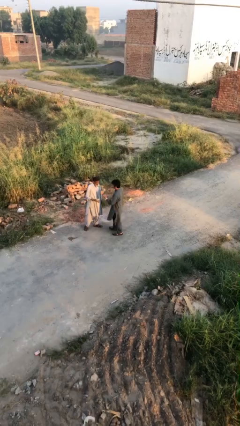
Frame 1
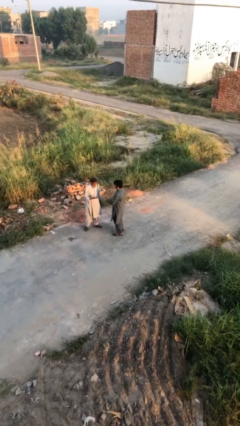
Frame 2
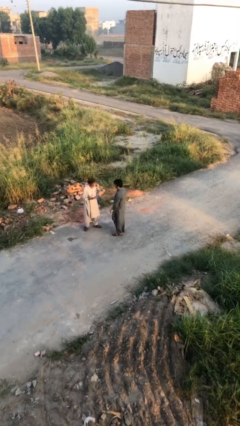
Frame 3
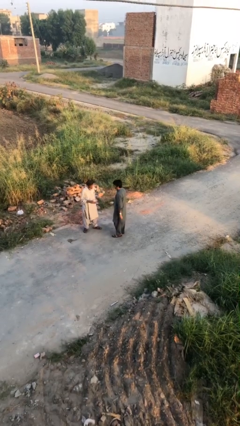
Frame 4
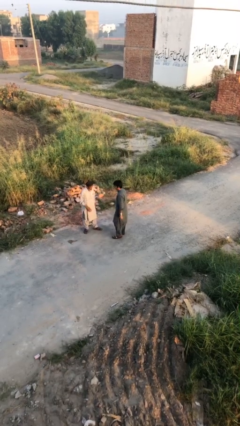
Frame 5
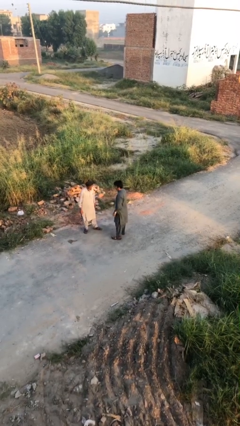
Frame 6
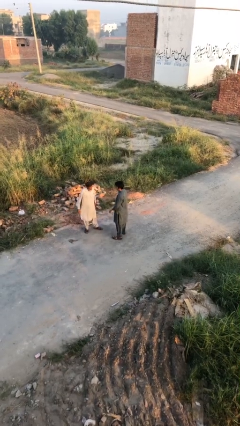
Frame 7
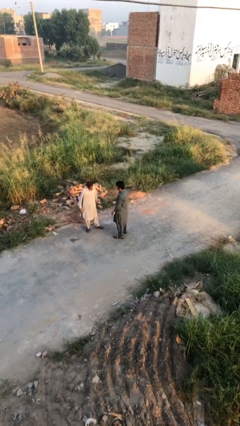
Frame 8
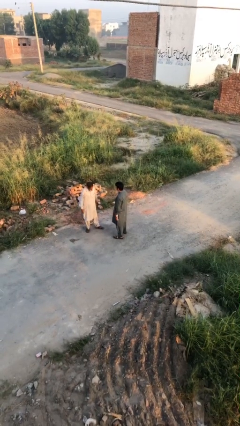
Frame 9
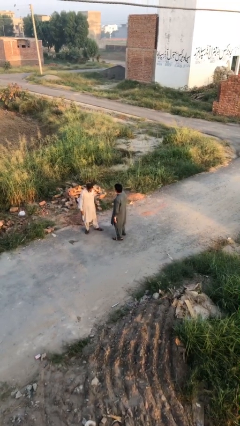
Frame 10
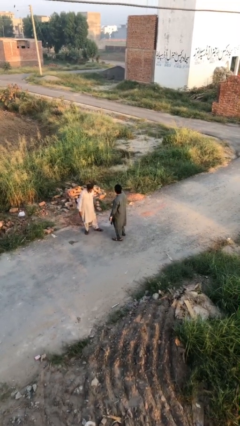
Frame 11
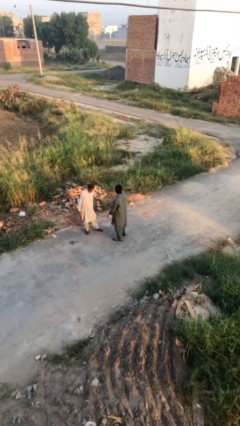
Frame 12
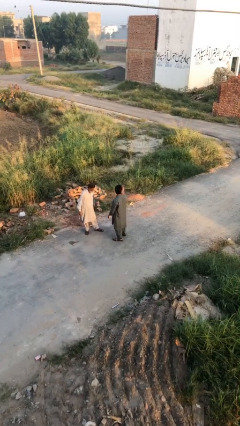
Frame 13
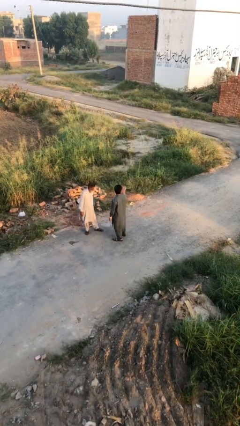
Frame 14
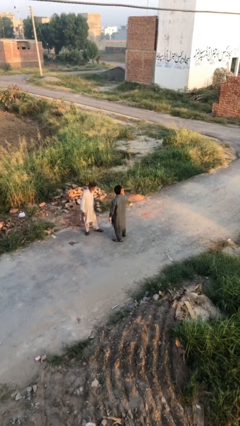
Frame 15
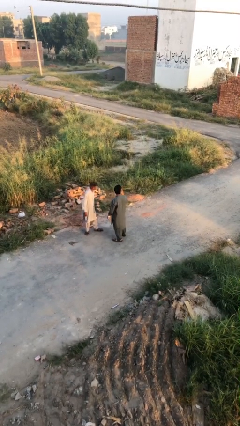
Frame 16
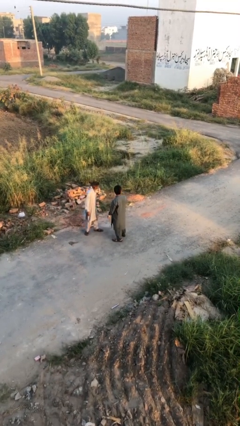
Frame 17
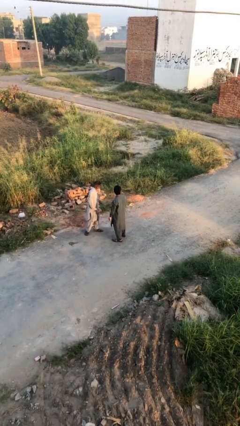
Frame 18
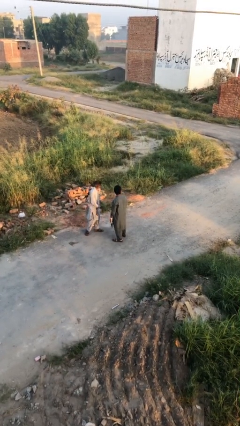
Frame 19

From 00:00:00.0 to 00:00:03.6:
person talks to person

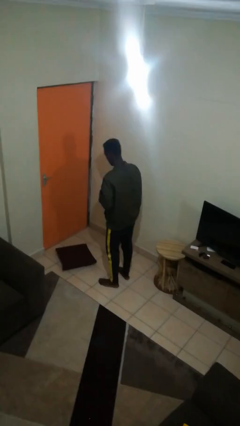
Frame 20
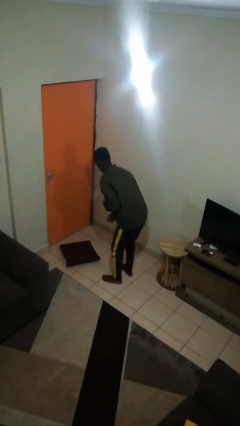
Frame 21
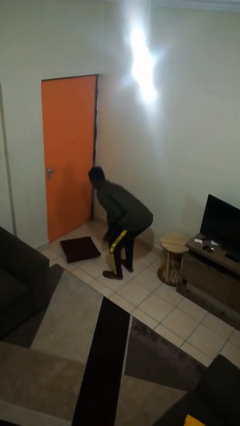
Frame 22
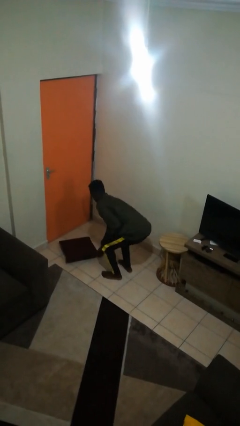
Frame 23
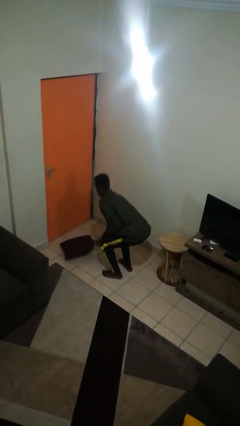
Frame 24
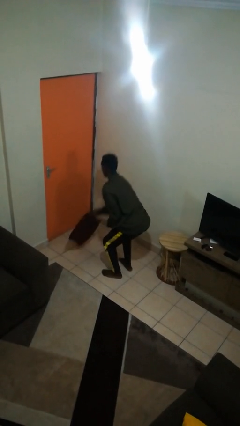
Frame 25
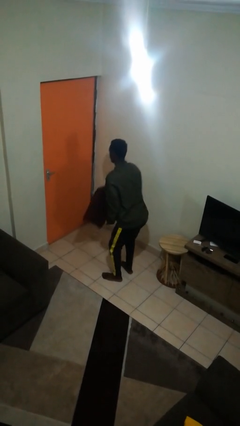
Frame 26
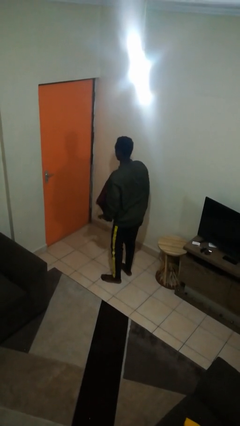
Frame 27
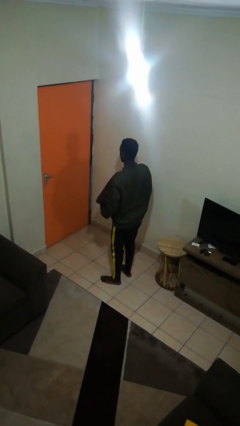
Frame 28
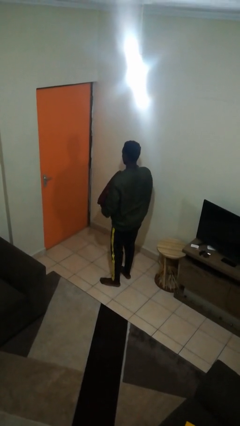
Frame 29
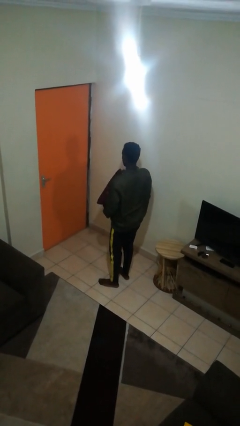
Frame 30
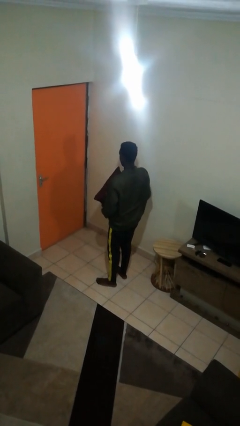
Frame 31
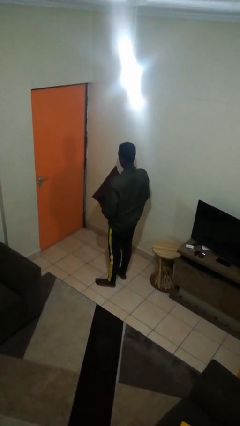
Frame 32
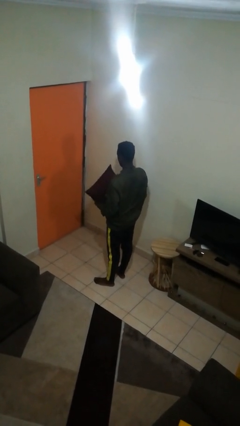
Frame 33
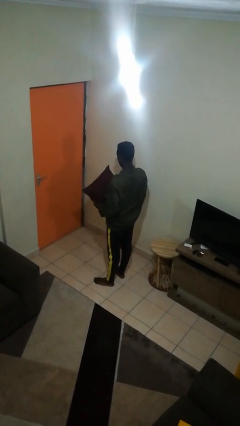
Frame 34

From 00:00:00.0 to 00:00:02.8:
person picks up object from floor

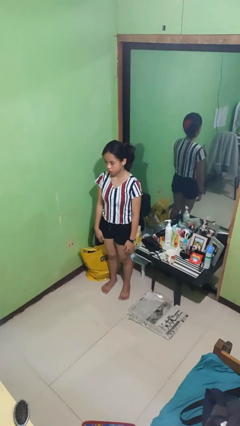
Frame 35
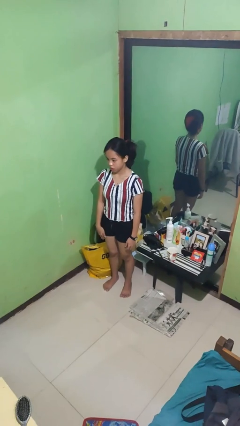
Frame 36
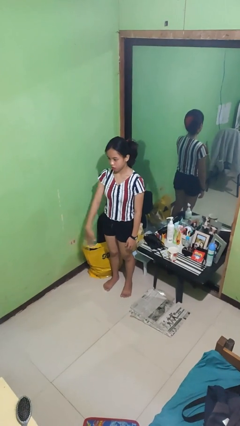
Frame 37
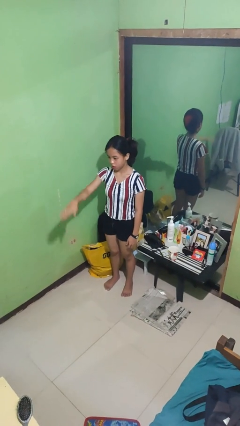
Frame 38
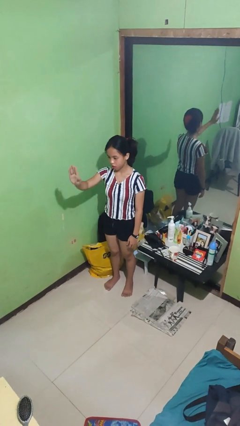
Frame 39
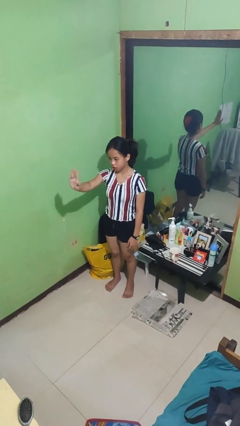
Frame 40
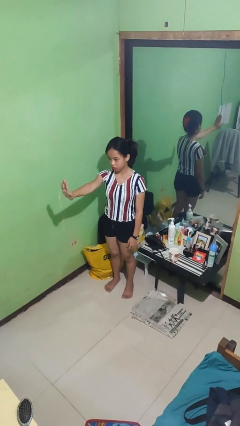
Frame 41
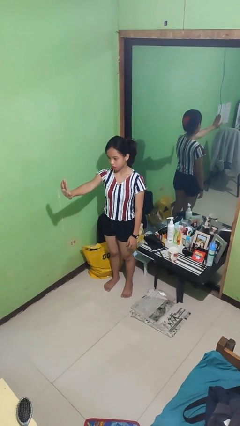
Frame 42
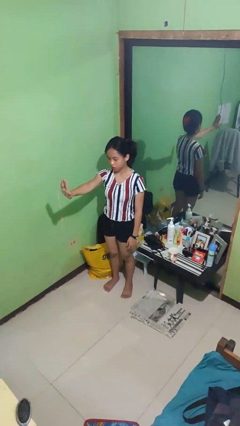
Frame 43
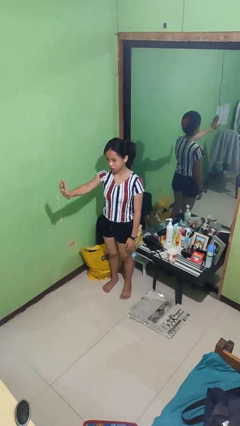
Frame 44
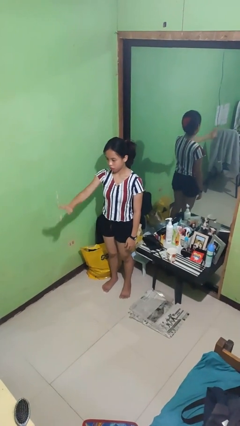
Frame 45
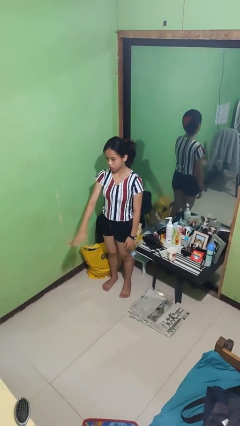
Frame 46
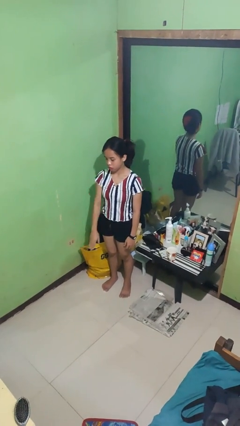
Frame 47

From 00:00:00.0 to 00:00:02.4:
person gestures stop

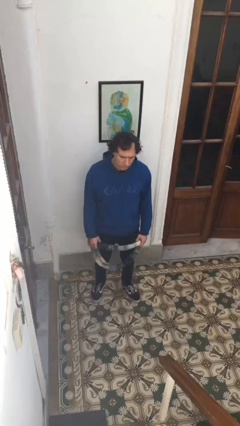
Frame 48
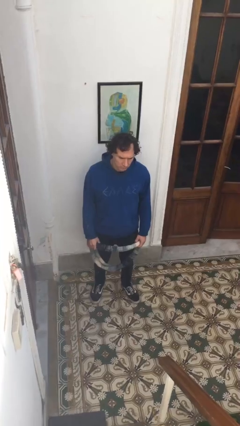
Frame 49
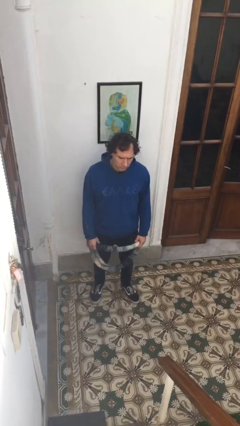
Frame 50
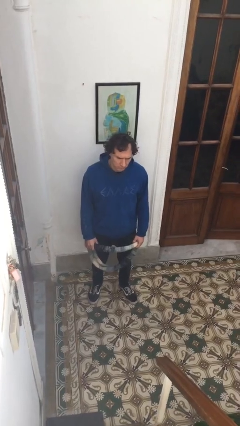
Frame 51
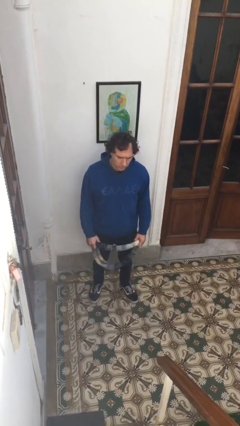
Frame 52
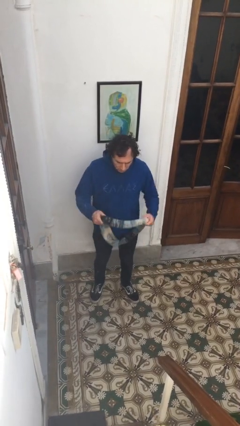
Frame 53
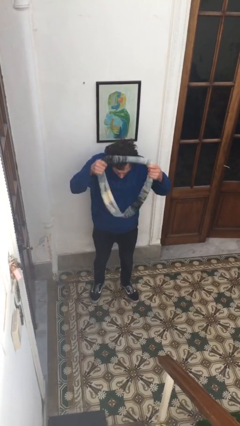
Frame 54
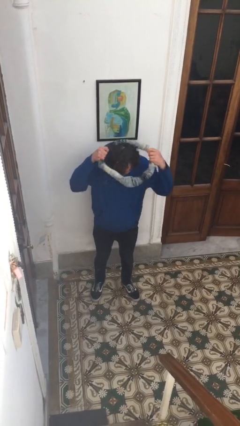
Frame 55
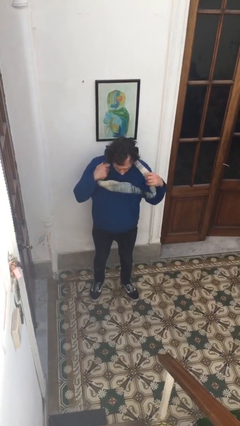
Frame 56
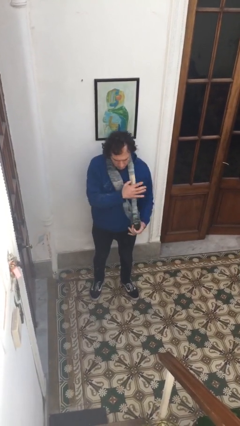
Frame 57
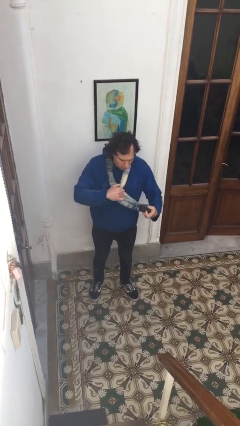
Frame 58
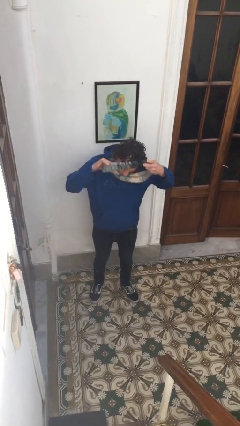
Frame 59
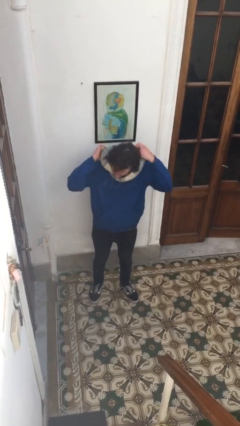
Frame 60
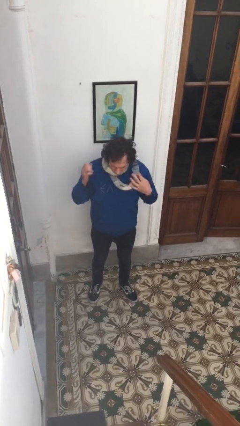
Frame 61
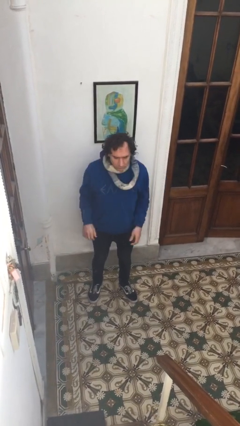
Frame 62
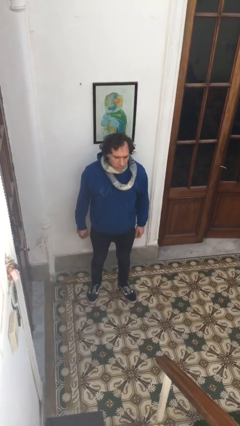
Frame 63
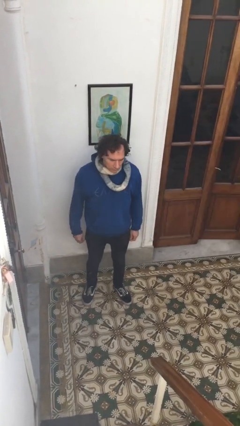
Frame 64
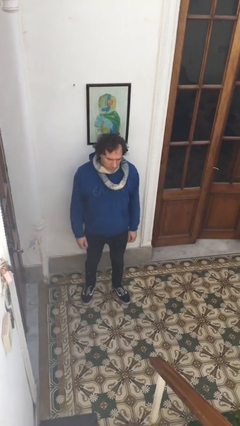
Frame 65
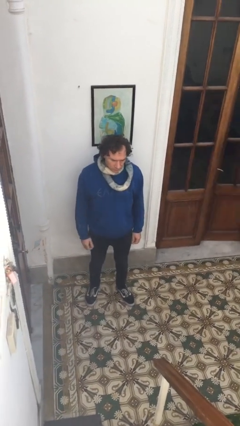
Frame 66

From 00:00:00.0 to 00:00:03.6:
person puts on scarf

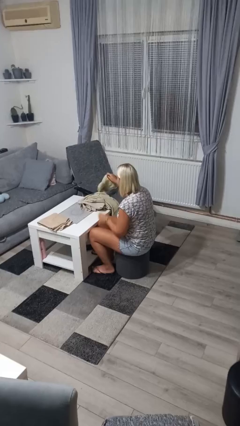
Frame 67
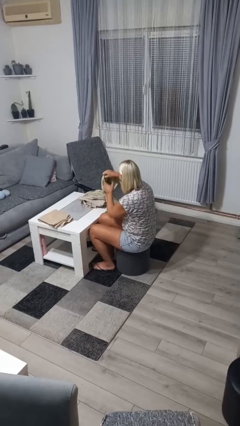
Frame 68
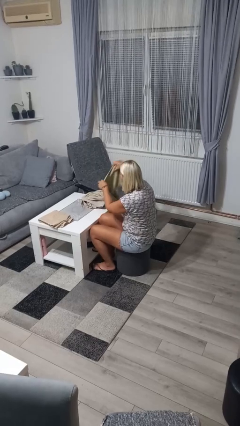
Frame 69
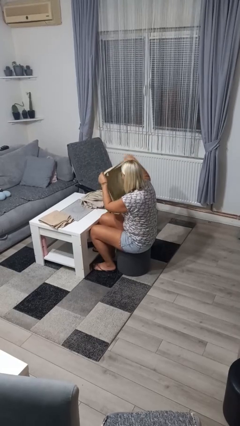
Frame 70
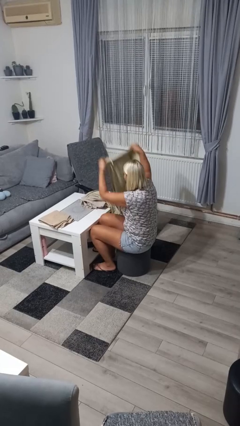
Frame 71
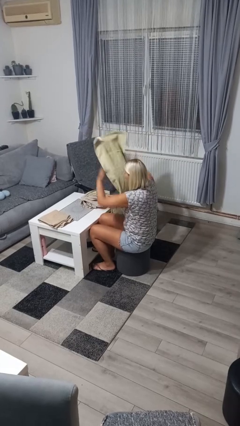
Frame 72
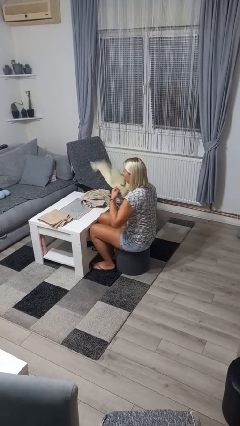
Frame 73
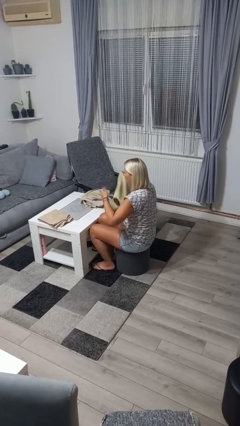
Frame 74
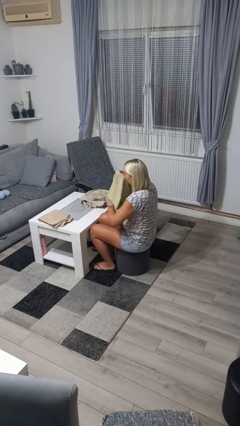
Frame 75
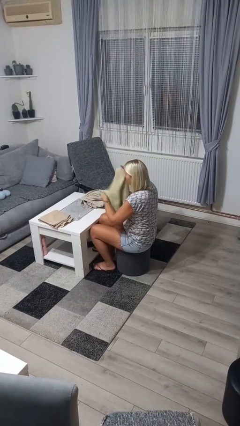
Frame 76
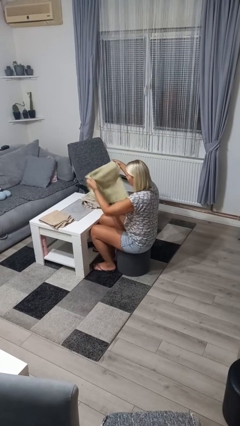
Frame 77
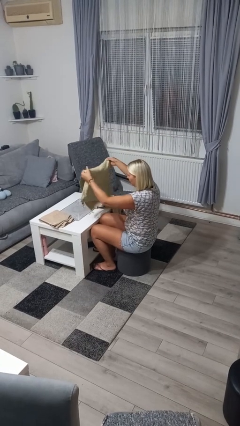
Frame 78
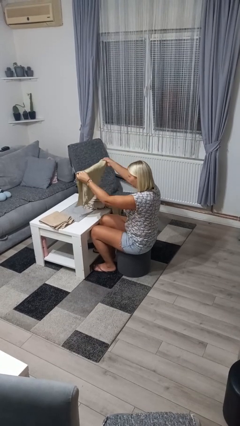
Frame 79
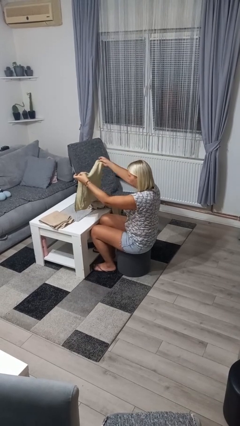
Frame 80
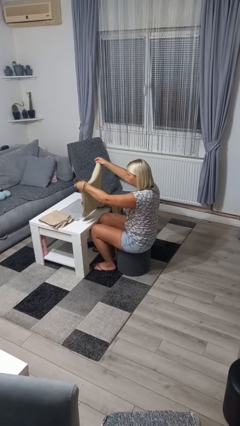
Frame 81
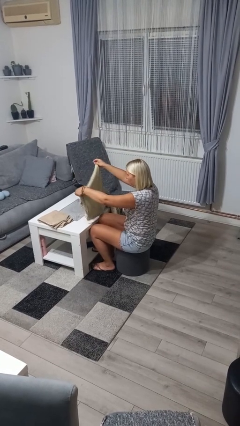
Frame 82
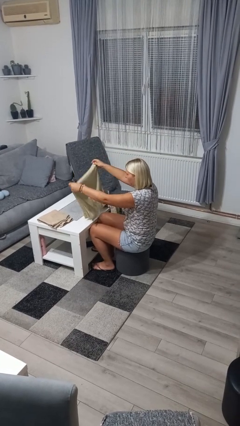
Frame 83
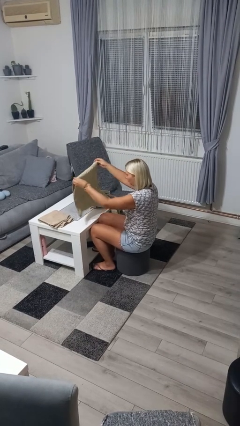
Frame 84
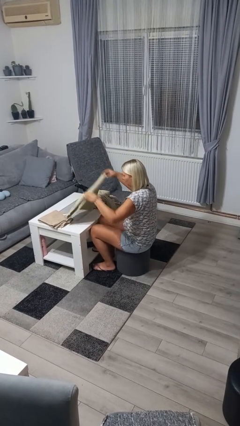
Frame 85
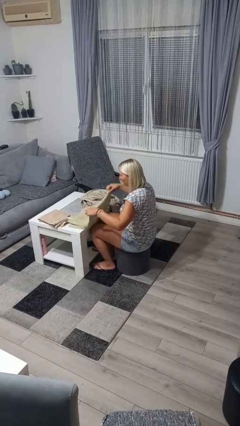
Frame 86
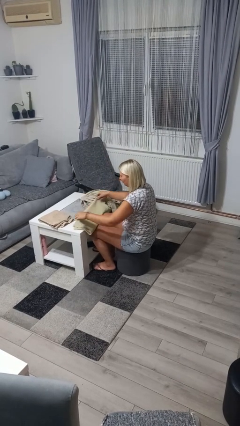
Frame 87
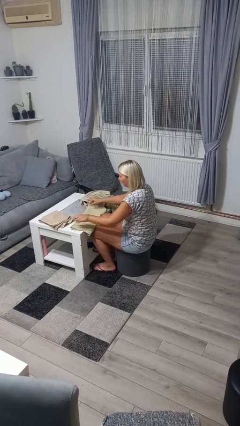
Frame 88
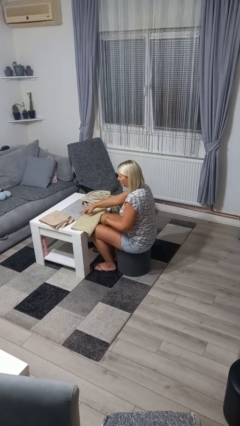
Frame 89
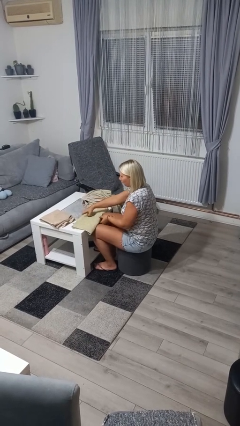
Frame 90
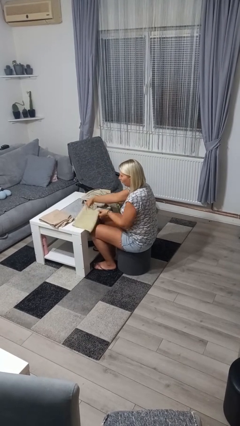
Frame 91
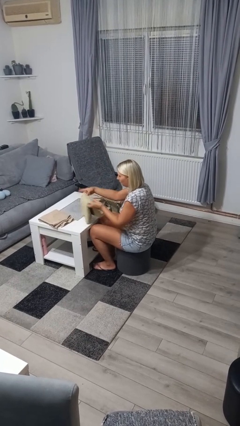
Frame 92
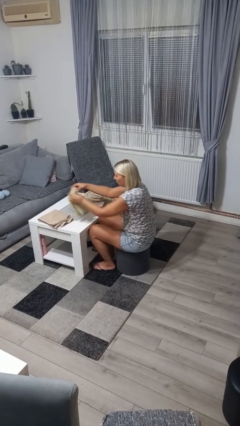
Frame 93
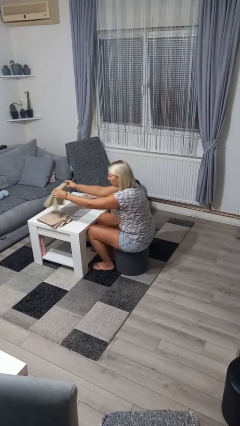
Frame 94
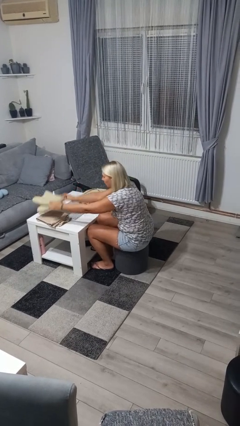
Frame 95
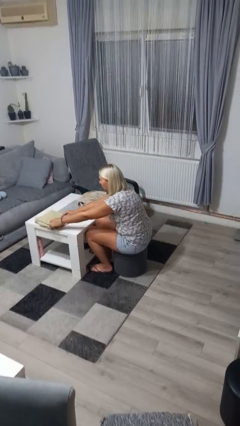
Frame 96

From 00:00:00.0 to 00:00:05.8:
person folds towel
